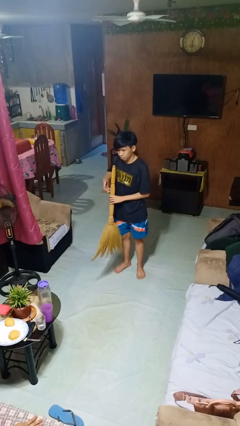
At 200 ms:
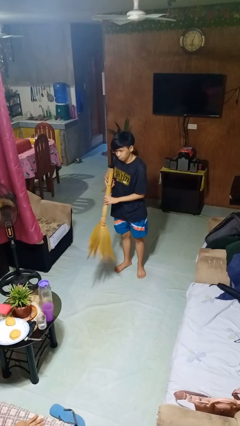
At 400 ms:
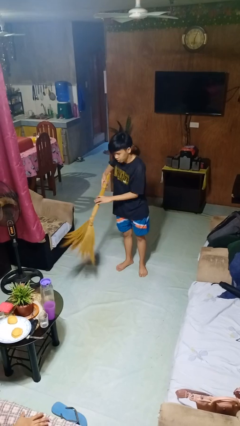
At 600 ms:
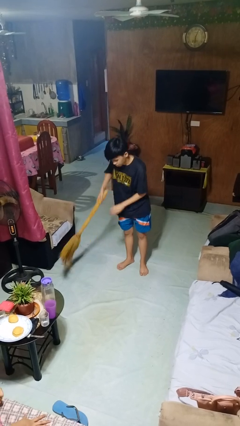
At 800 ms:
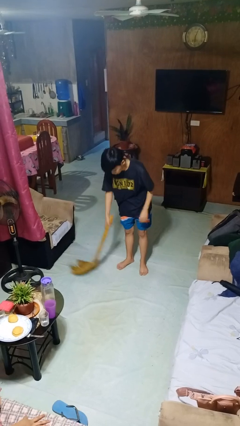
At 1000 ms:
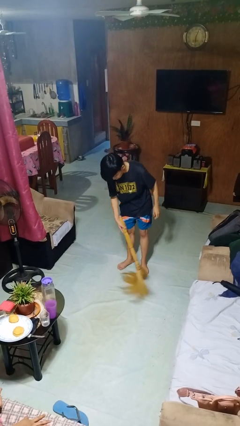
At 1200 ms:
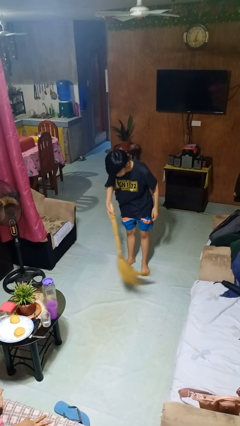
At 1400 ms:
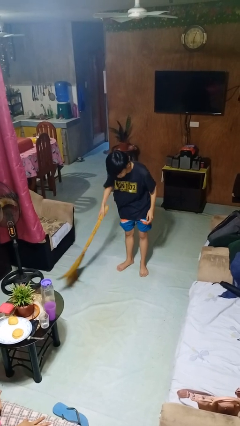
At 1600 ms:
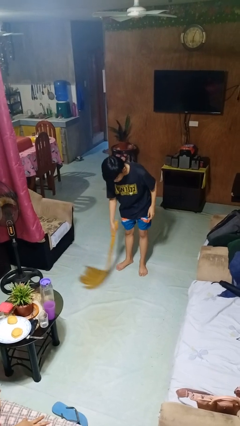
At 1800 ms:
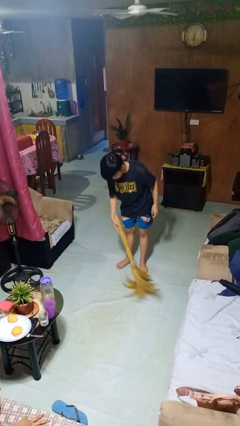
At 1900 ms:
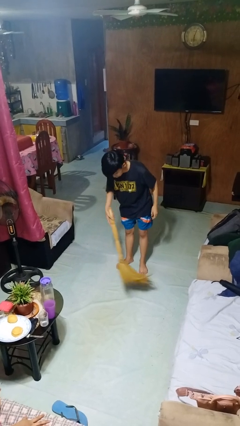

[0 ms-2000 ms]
person sweeps floor

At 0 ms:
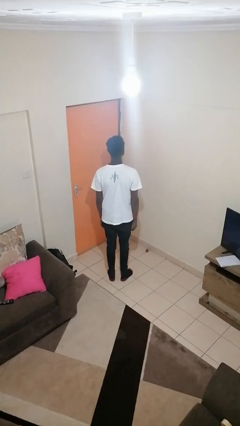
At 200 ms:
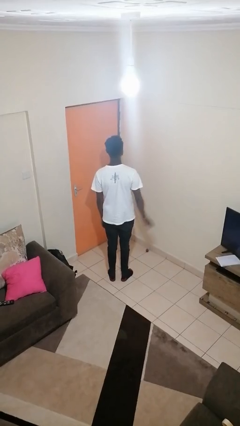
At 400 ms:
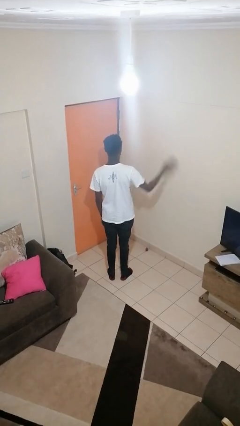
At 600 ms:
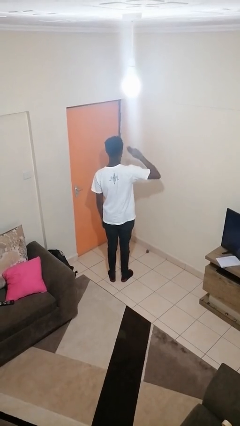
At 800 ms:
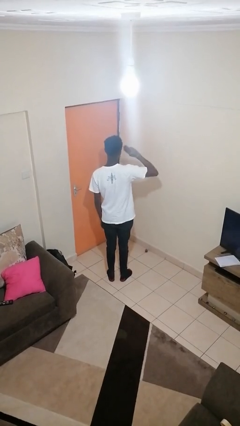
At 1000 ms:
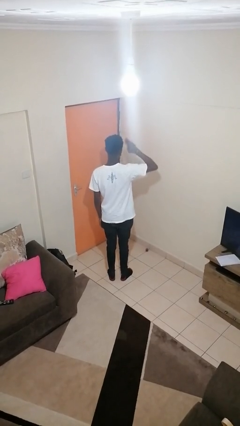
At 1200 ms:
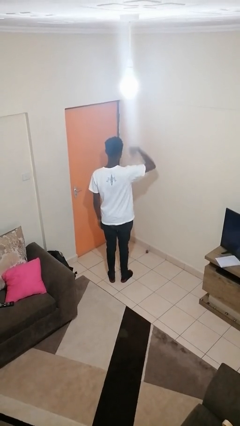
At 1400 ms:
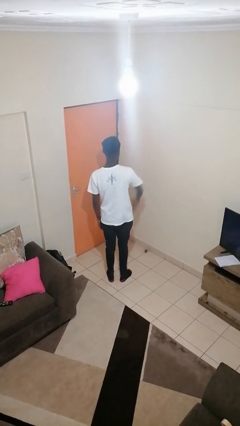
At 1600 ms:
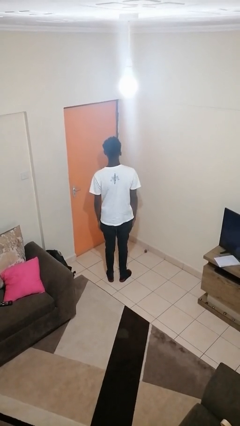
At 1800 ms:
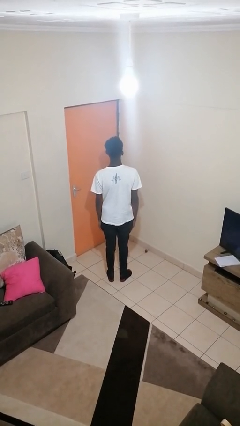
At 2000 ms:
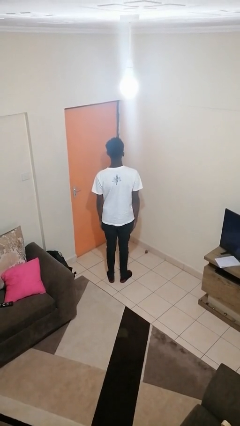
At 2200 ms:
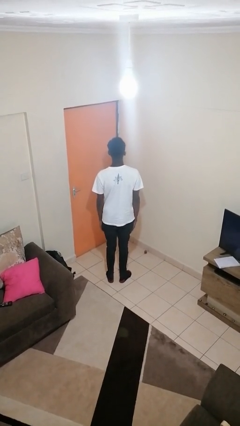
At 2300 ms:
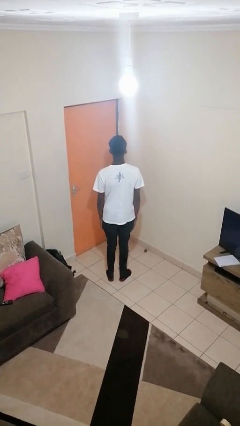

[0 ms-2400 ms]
person salutes

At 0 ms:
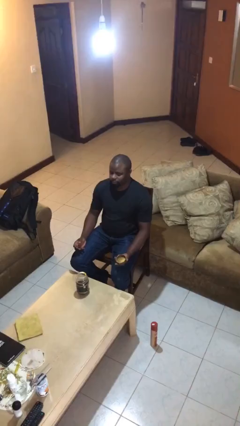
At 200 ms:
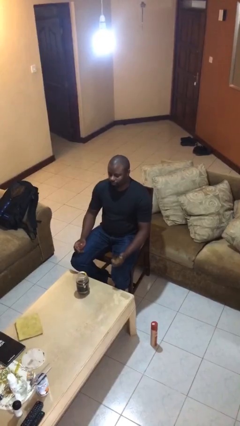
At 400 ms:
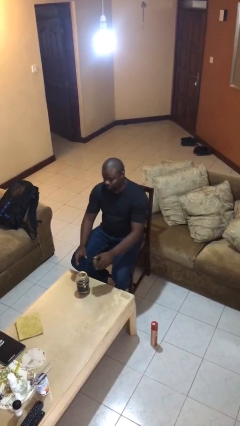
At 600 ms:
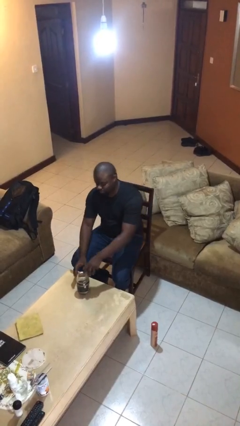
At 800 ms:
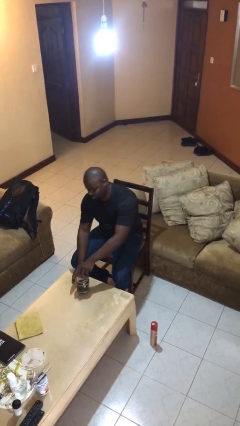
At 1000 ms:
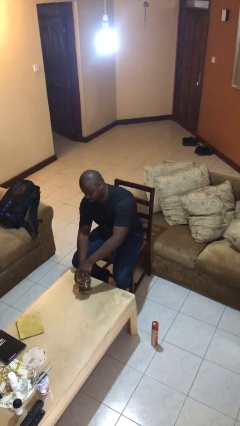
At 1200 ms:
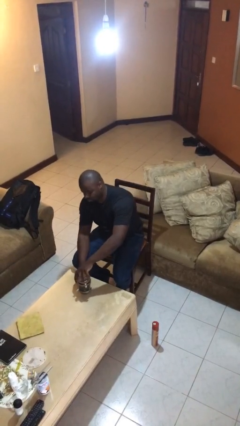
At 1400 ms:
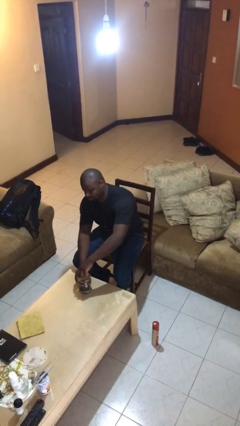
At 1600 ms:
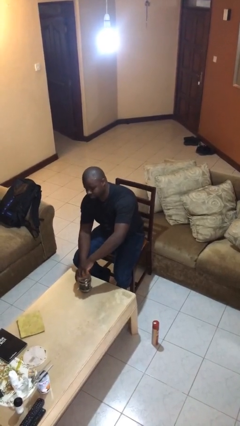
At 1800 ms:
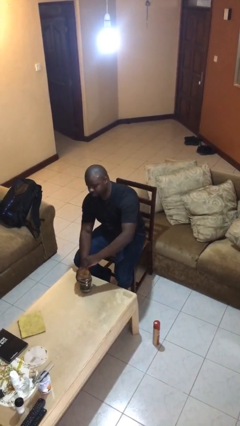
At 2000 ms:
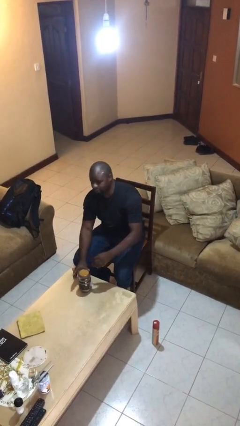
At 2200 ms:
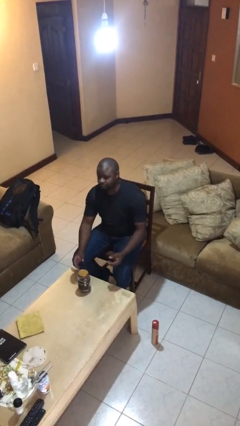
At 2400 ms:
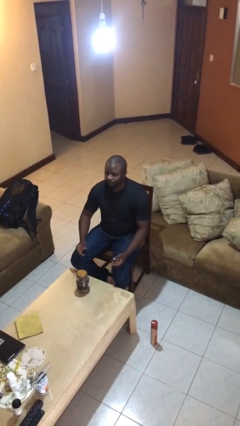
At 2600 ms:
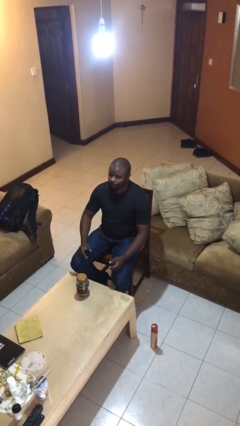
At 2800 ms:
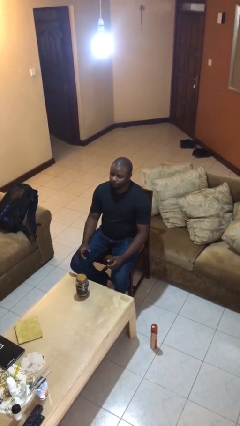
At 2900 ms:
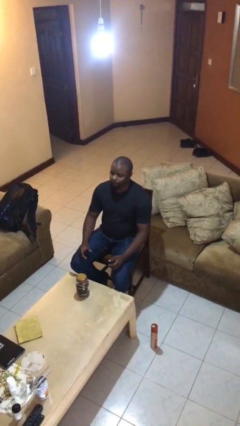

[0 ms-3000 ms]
person closes jar

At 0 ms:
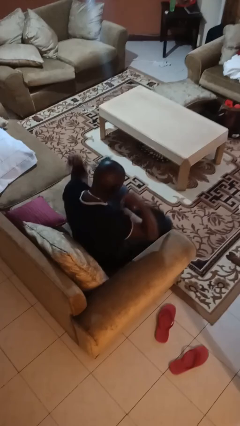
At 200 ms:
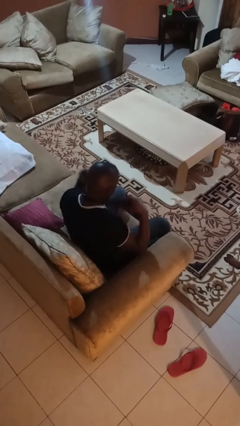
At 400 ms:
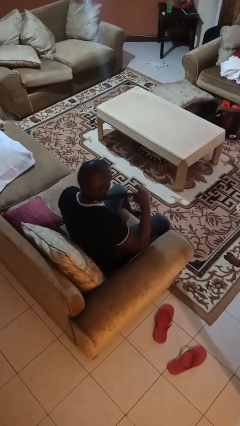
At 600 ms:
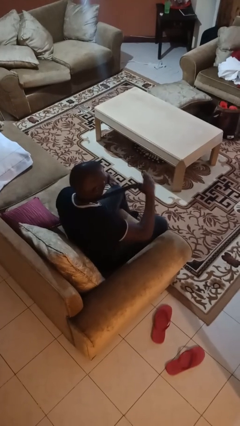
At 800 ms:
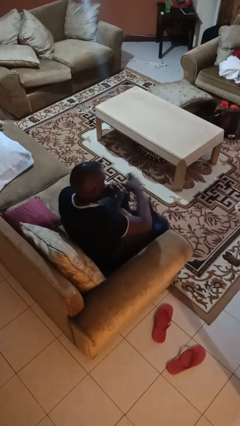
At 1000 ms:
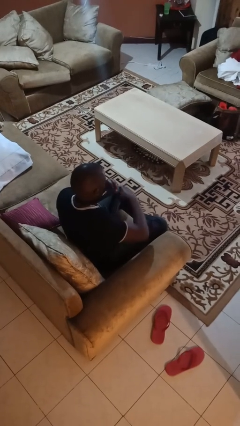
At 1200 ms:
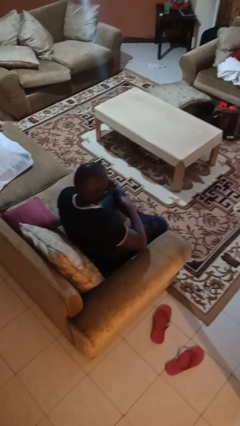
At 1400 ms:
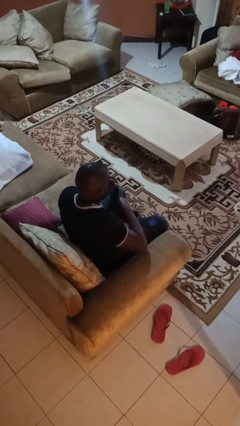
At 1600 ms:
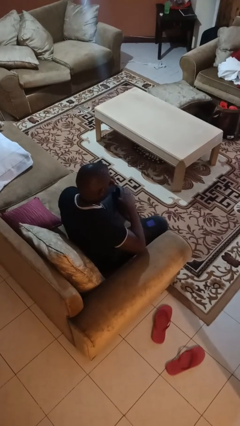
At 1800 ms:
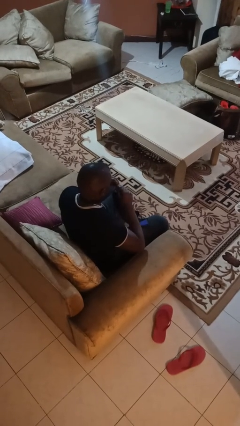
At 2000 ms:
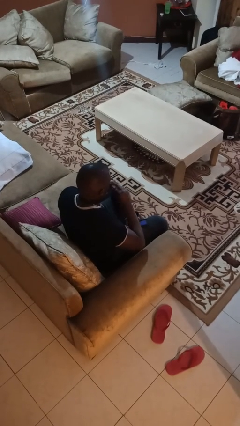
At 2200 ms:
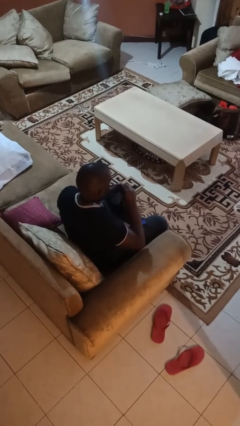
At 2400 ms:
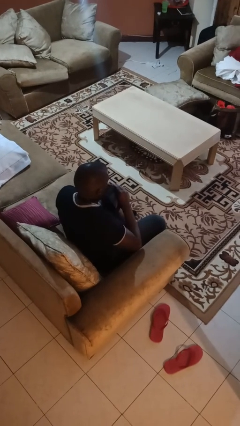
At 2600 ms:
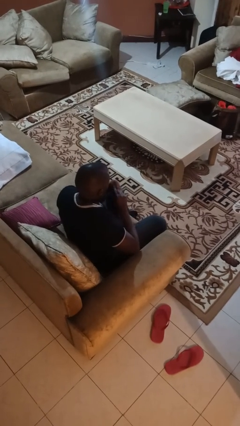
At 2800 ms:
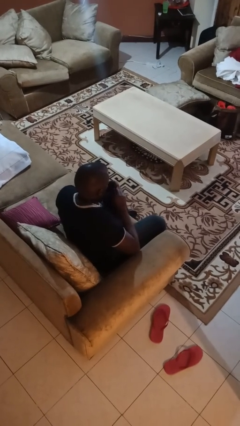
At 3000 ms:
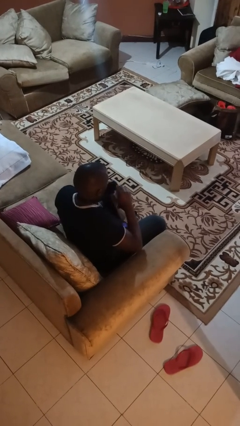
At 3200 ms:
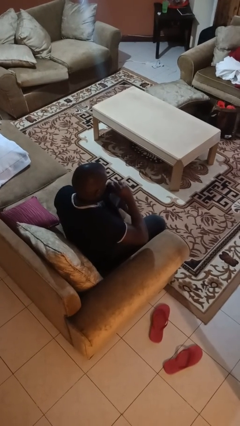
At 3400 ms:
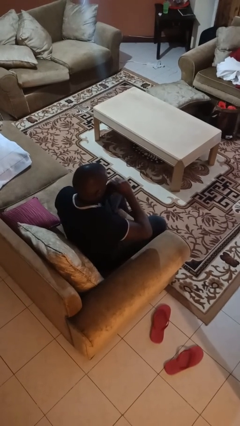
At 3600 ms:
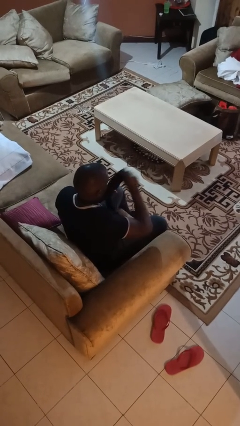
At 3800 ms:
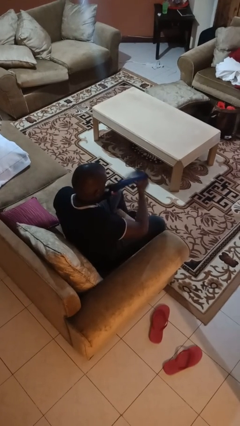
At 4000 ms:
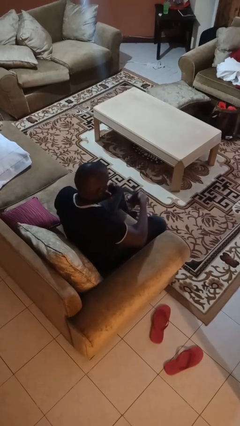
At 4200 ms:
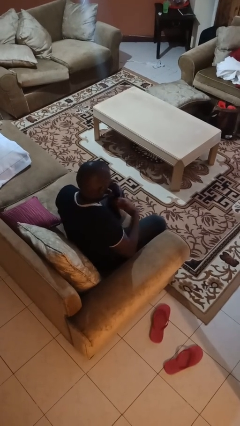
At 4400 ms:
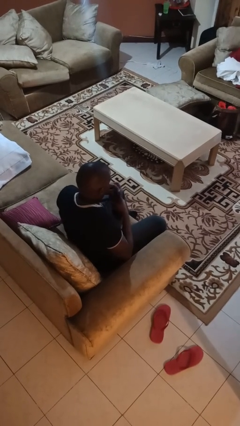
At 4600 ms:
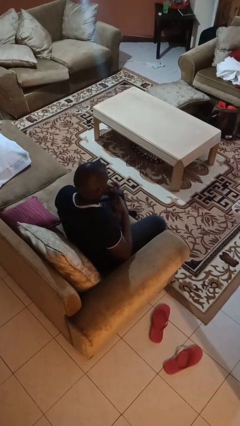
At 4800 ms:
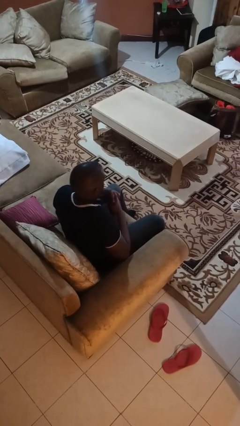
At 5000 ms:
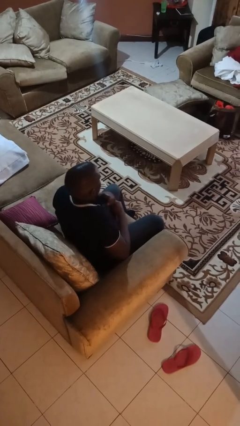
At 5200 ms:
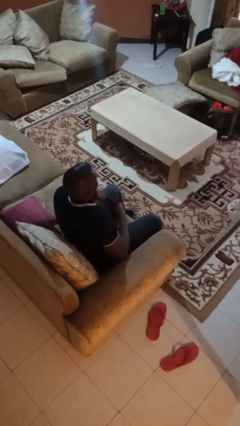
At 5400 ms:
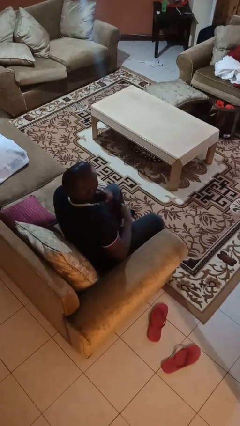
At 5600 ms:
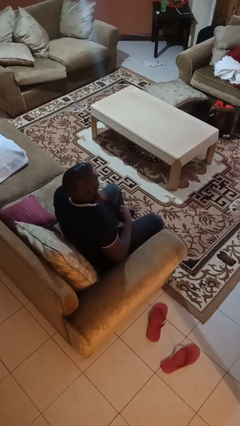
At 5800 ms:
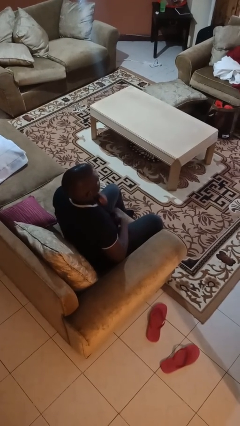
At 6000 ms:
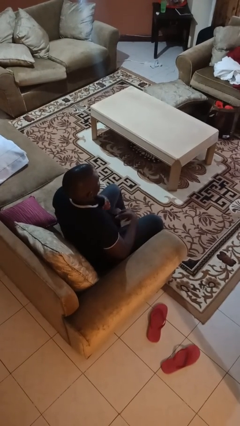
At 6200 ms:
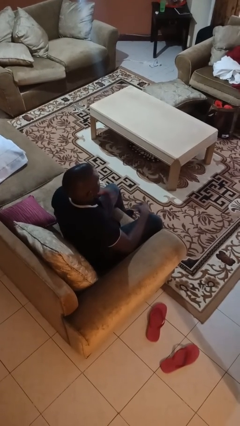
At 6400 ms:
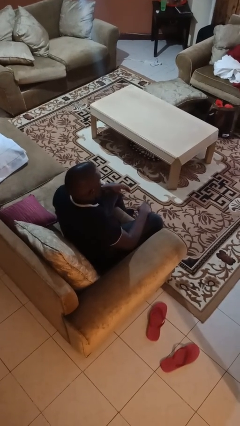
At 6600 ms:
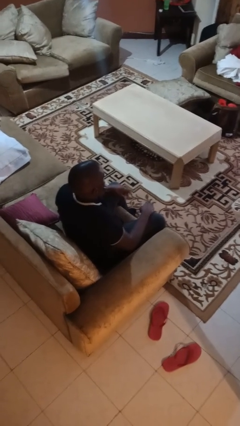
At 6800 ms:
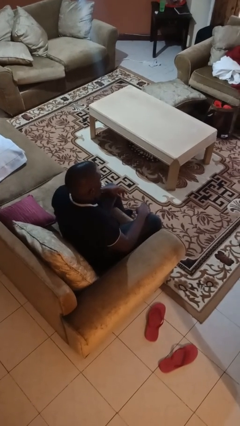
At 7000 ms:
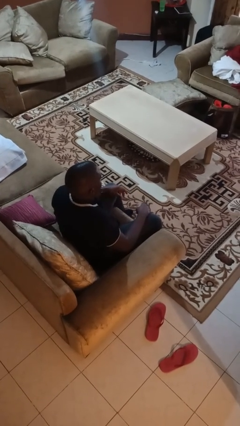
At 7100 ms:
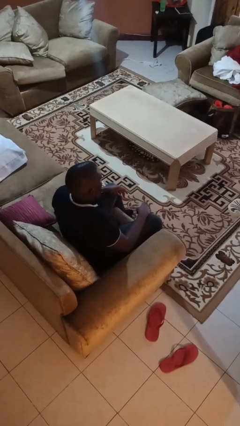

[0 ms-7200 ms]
person puts on necktie

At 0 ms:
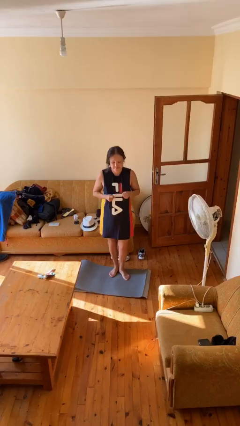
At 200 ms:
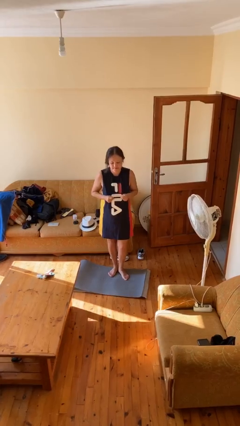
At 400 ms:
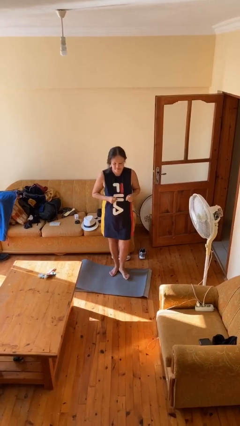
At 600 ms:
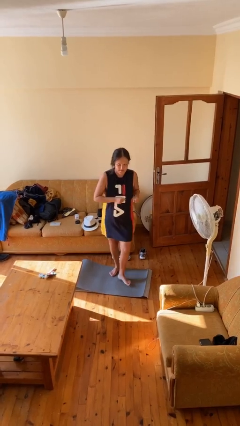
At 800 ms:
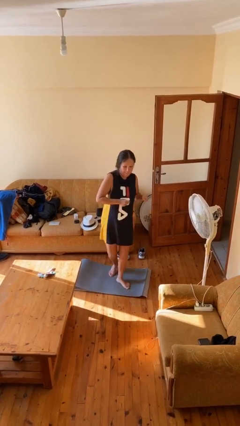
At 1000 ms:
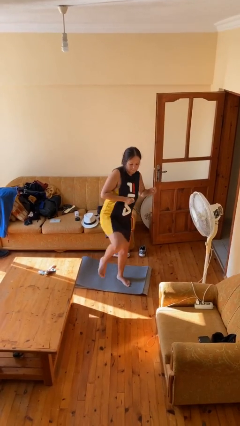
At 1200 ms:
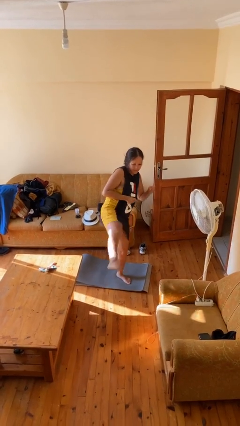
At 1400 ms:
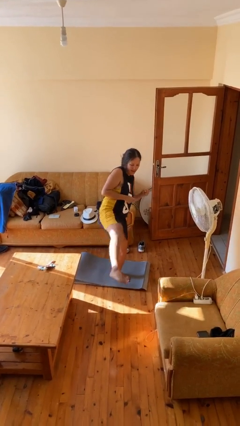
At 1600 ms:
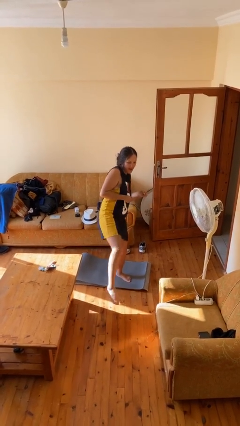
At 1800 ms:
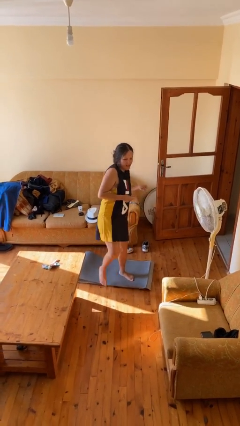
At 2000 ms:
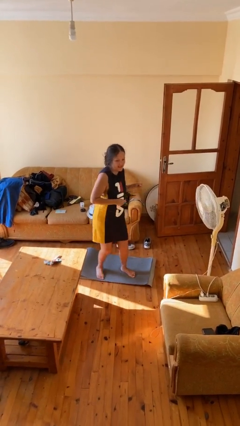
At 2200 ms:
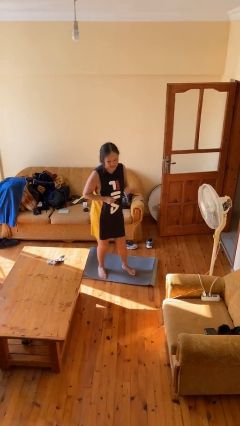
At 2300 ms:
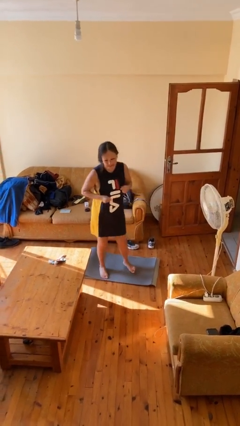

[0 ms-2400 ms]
person karate kicks
